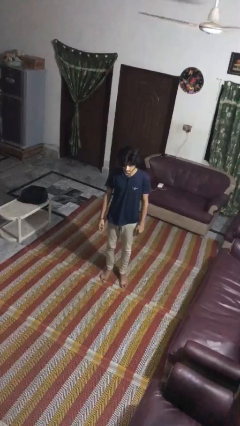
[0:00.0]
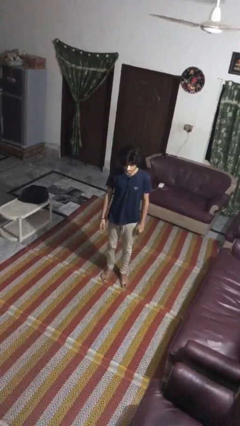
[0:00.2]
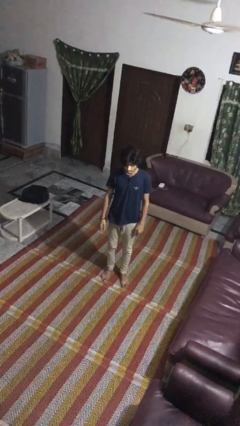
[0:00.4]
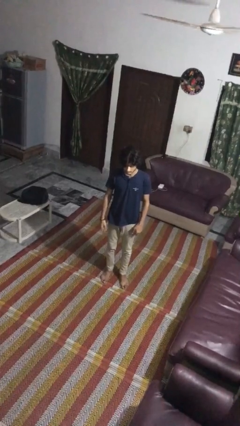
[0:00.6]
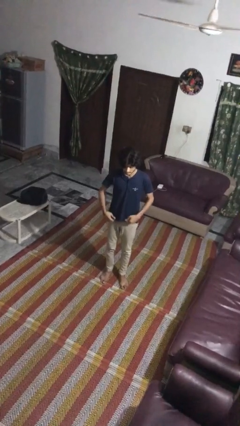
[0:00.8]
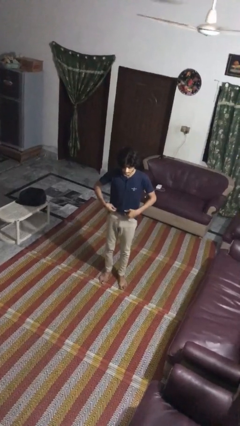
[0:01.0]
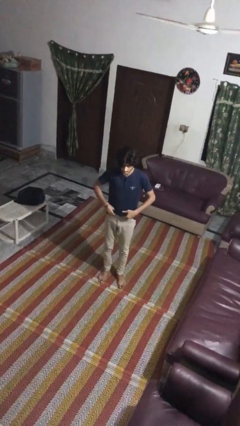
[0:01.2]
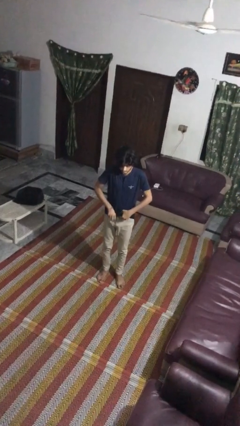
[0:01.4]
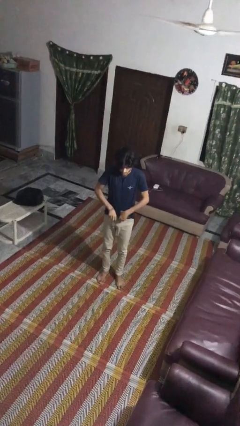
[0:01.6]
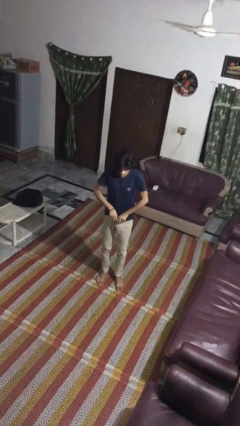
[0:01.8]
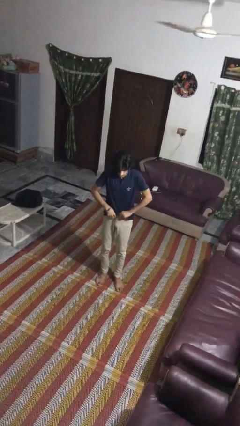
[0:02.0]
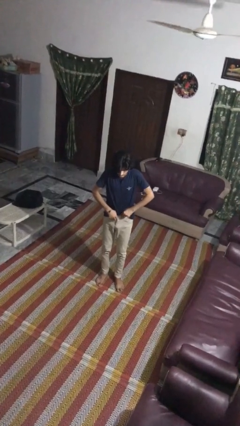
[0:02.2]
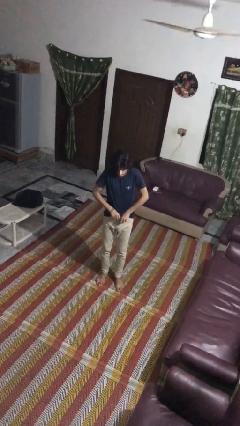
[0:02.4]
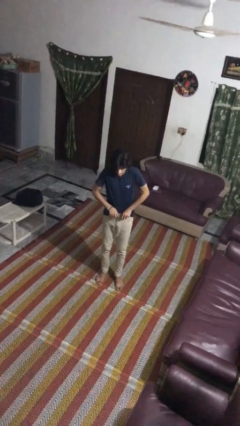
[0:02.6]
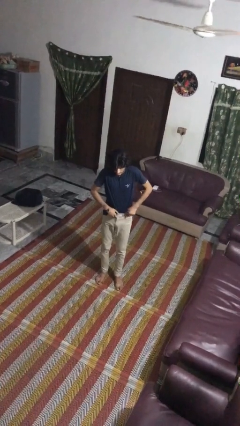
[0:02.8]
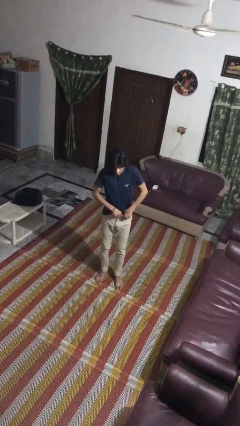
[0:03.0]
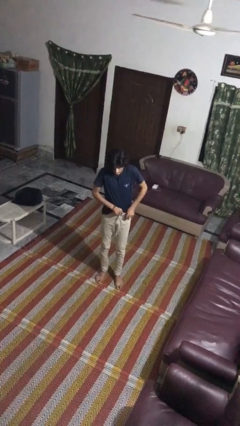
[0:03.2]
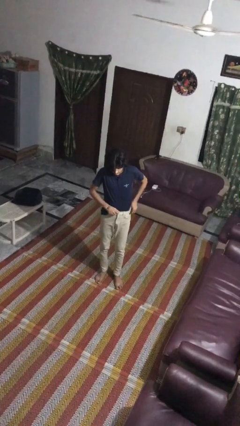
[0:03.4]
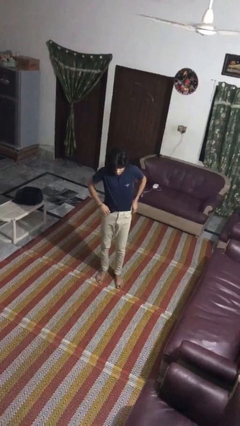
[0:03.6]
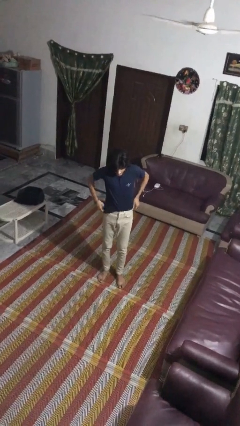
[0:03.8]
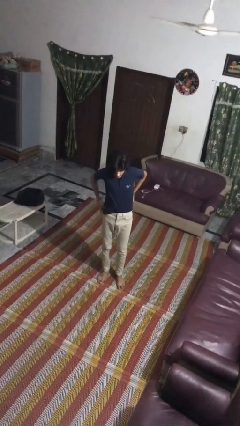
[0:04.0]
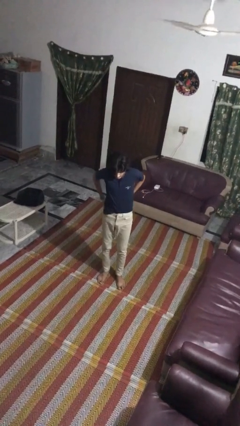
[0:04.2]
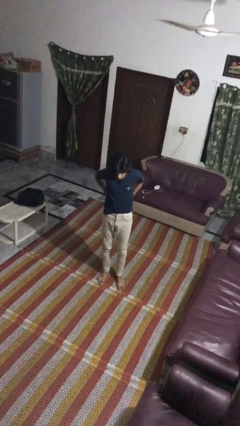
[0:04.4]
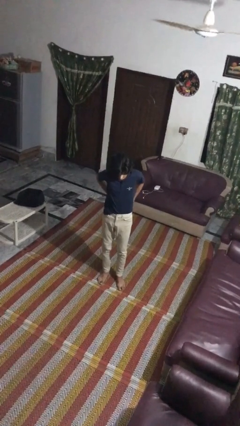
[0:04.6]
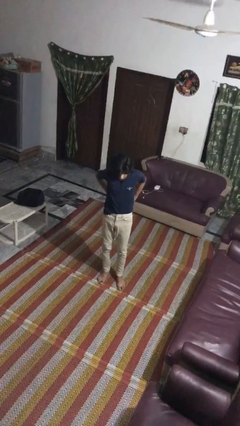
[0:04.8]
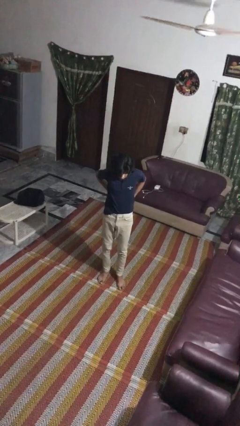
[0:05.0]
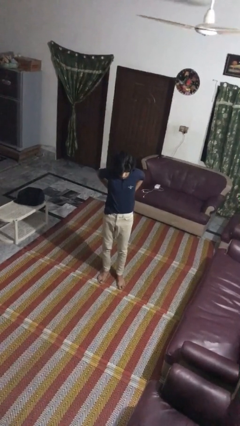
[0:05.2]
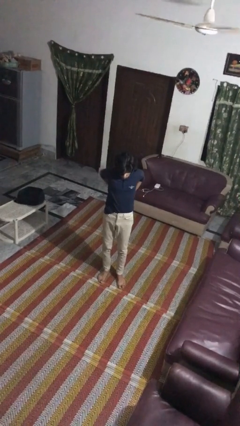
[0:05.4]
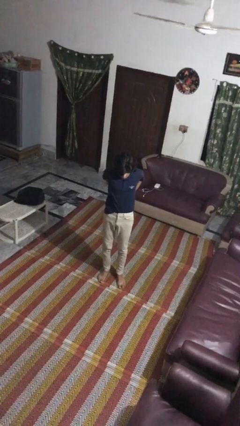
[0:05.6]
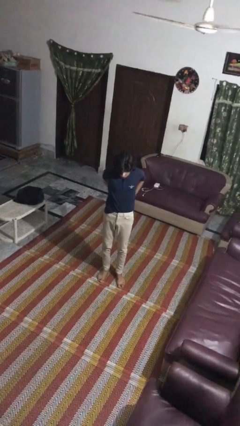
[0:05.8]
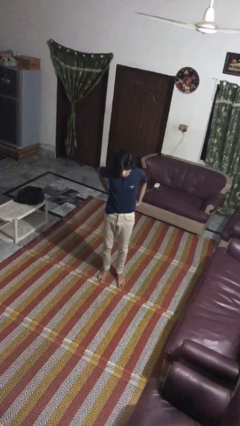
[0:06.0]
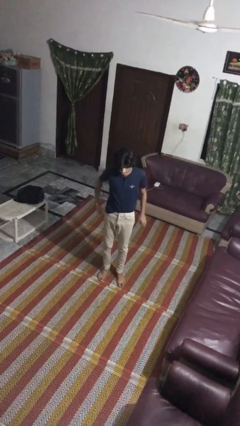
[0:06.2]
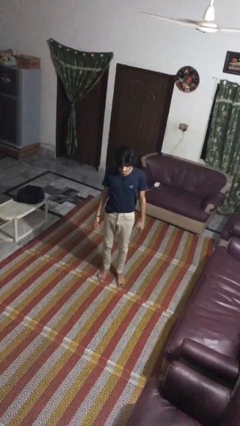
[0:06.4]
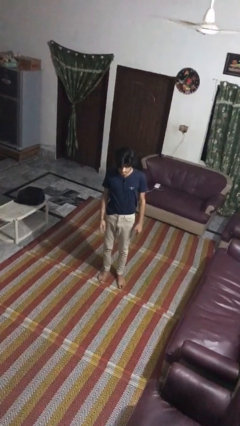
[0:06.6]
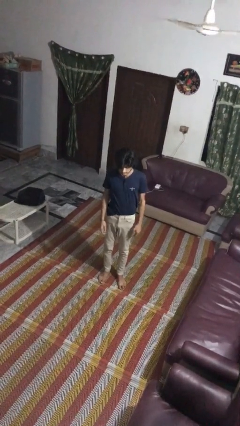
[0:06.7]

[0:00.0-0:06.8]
person tucks in shirt

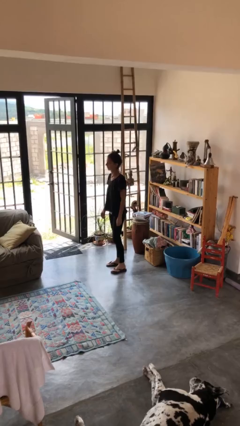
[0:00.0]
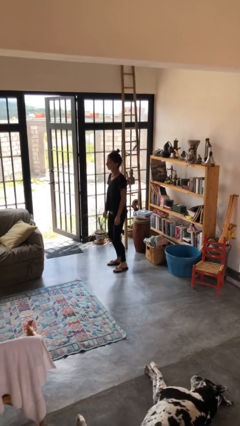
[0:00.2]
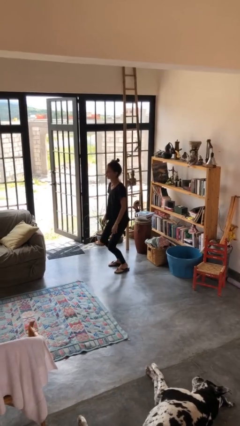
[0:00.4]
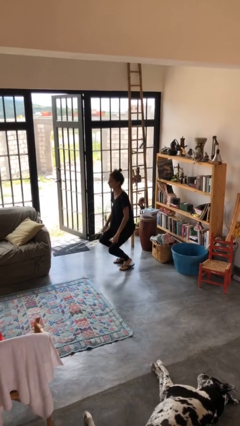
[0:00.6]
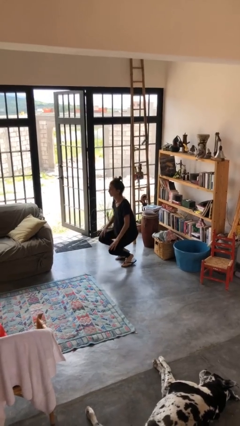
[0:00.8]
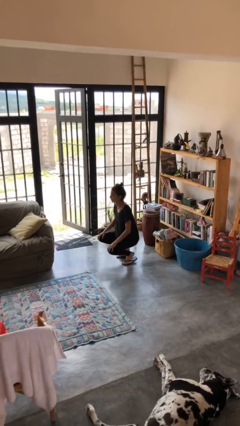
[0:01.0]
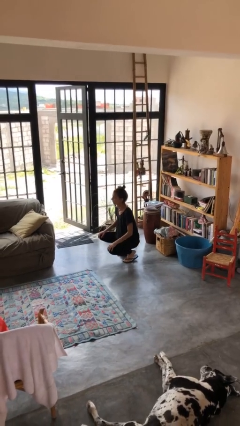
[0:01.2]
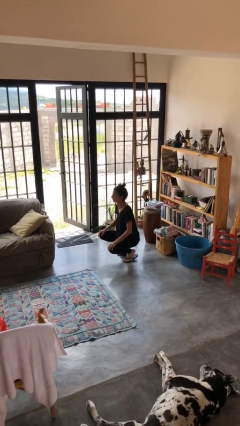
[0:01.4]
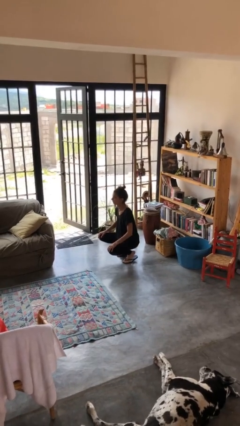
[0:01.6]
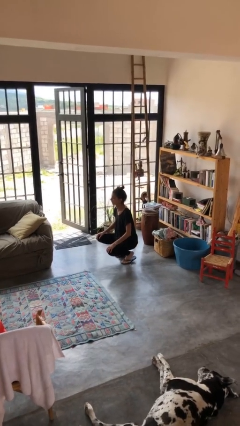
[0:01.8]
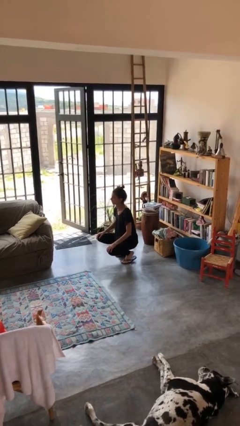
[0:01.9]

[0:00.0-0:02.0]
person squats

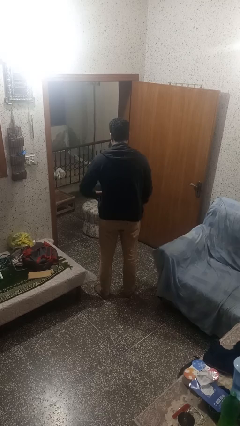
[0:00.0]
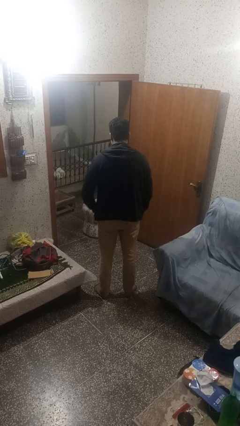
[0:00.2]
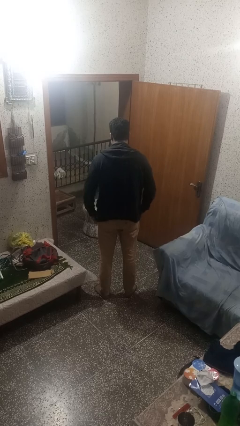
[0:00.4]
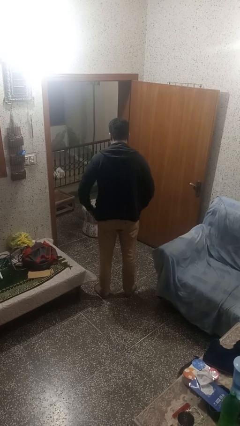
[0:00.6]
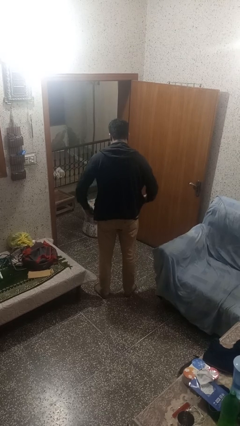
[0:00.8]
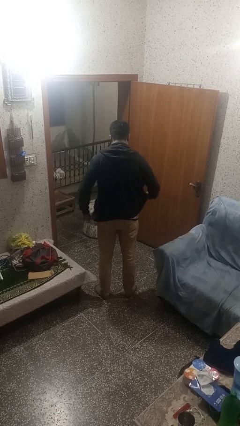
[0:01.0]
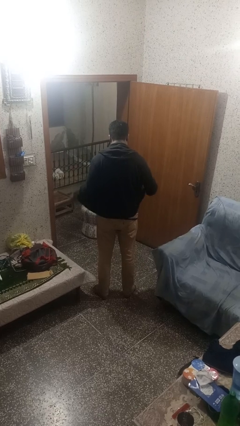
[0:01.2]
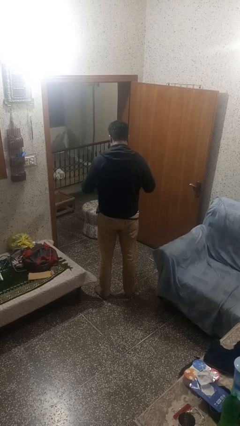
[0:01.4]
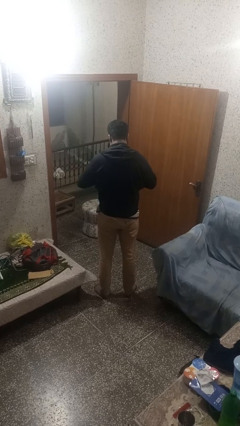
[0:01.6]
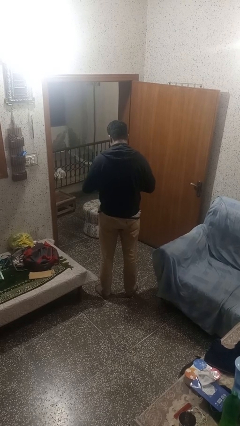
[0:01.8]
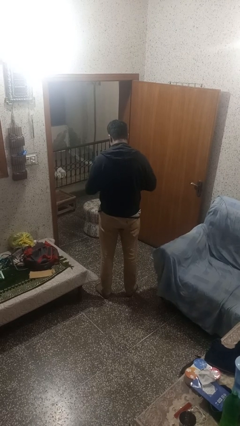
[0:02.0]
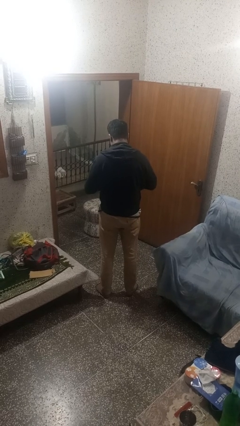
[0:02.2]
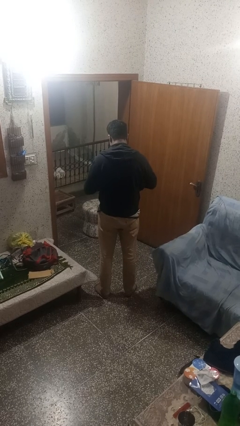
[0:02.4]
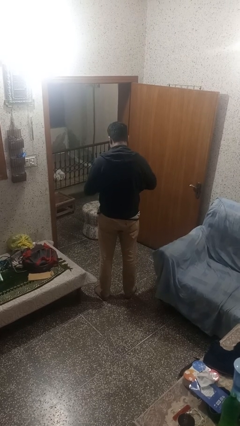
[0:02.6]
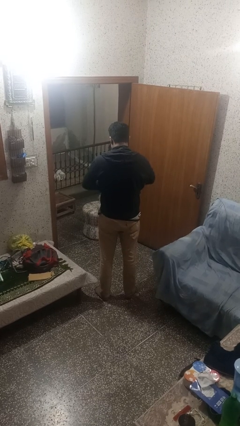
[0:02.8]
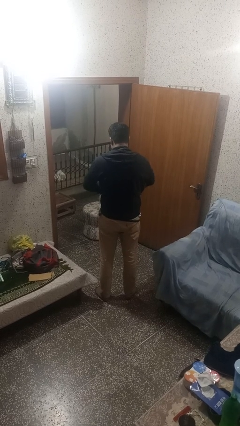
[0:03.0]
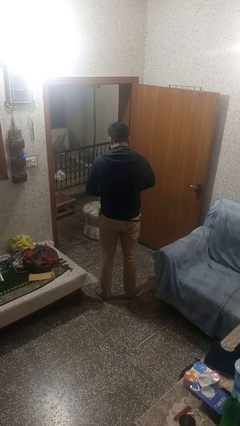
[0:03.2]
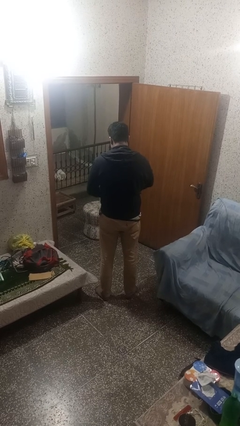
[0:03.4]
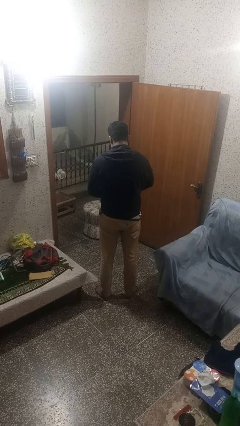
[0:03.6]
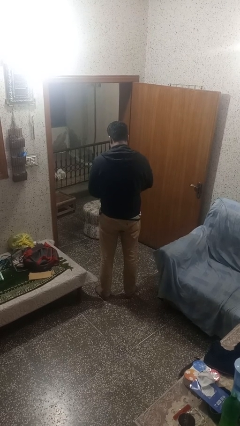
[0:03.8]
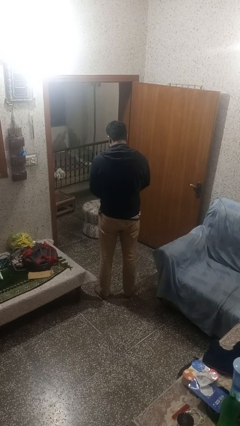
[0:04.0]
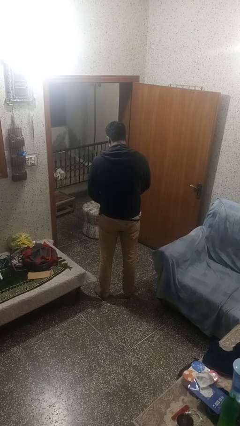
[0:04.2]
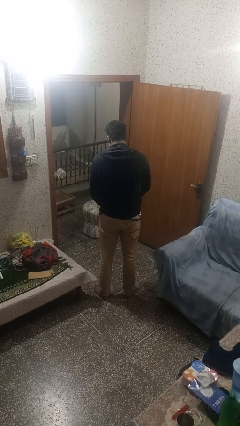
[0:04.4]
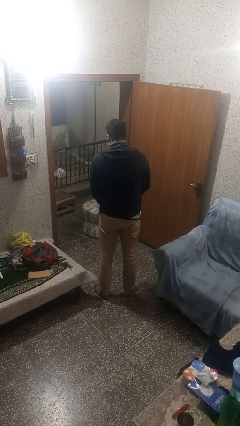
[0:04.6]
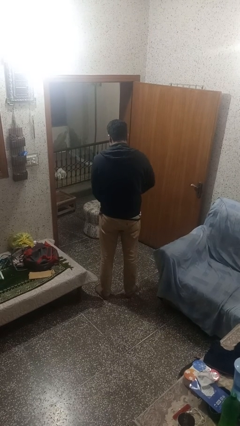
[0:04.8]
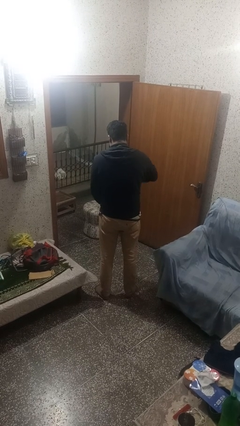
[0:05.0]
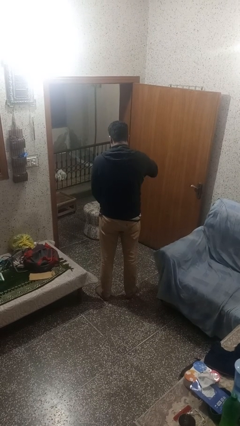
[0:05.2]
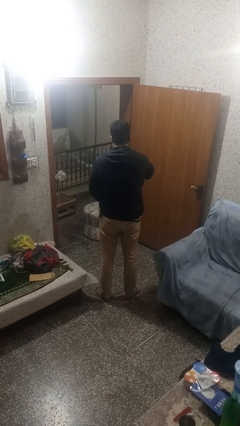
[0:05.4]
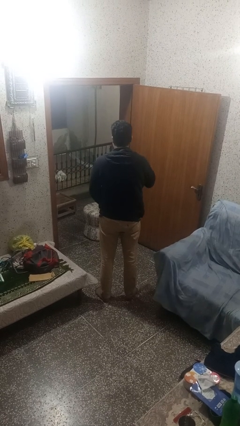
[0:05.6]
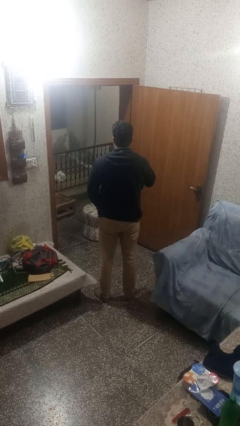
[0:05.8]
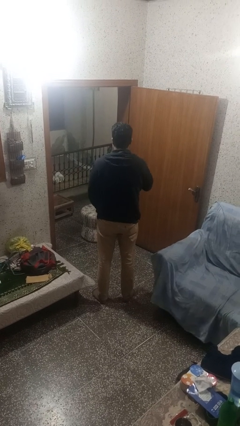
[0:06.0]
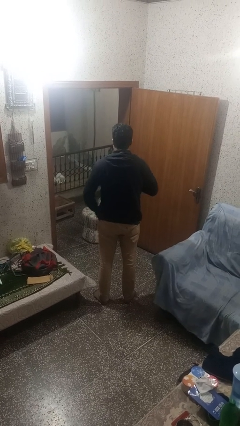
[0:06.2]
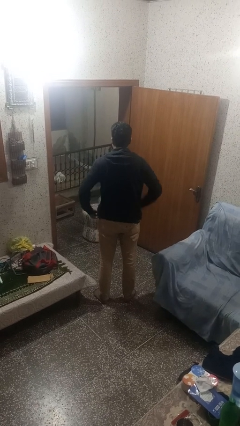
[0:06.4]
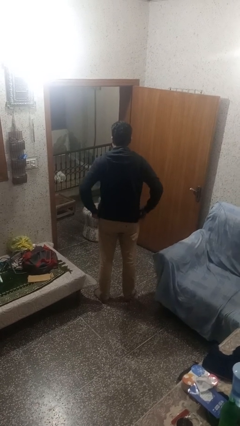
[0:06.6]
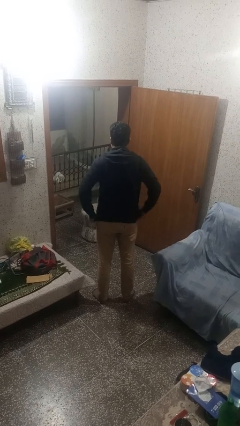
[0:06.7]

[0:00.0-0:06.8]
person zips up jacket

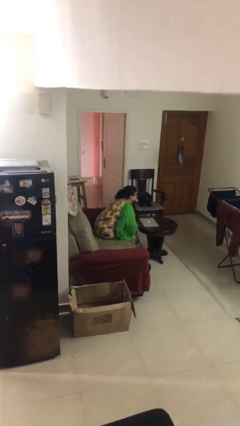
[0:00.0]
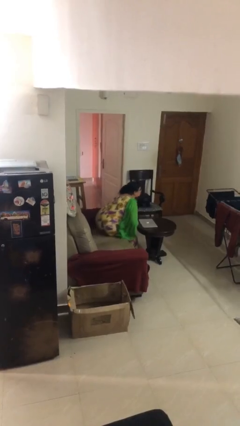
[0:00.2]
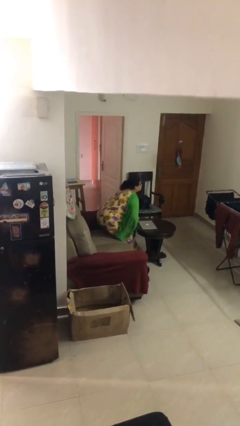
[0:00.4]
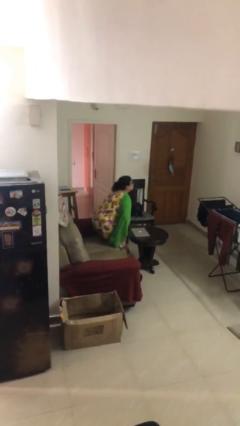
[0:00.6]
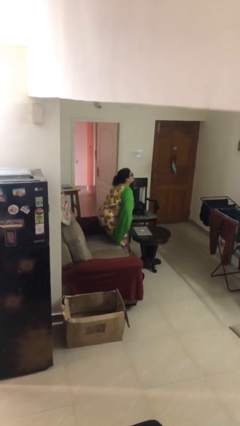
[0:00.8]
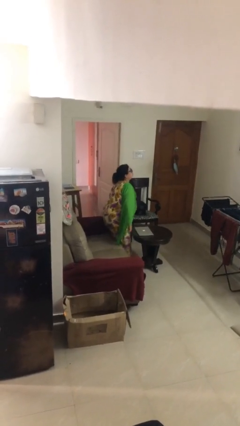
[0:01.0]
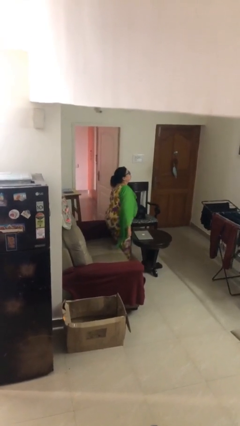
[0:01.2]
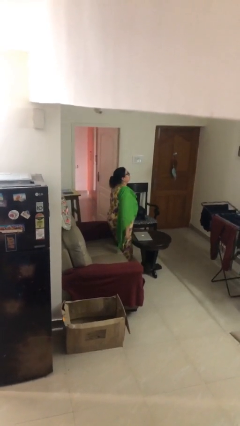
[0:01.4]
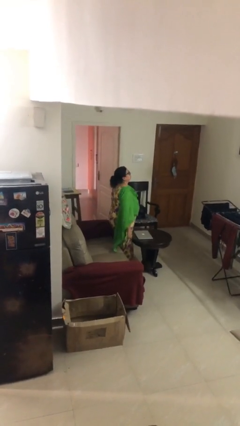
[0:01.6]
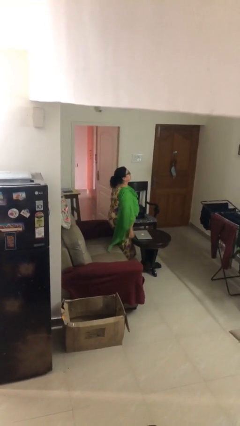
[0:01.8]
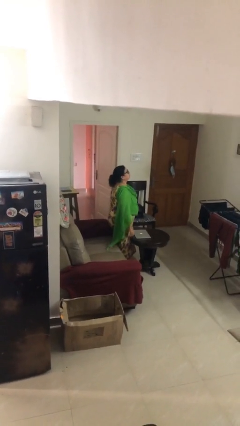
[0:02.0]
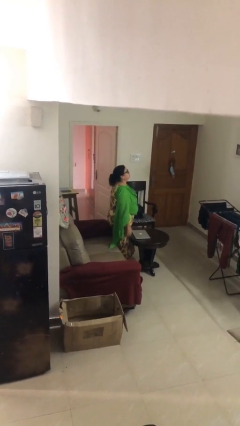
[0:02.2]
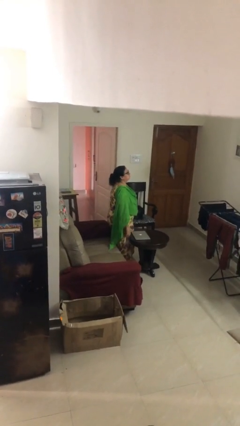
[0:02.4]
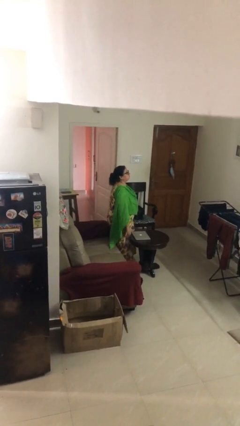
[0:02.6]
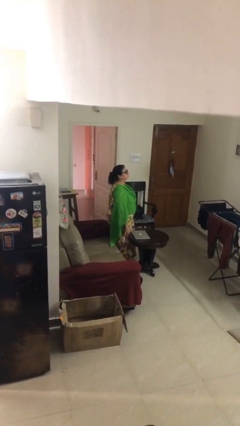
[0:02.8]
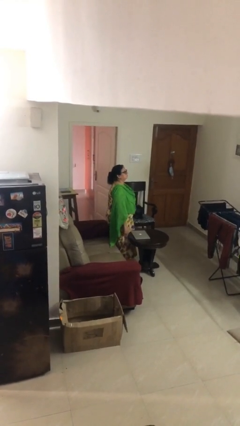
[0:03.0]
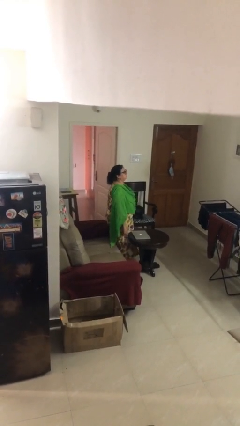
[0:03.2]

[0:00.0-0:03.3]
person stands up
